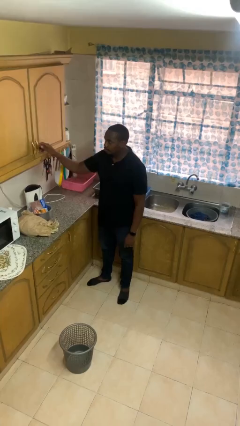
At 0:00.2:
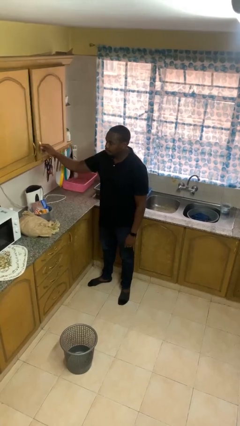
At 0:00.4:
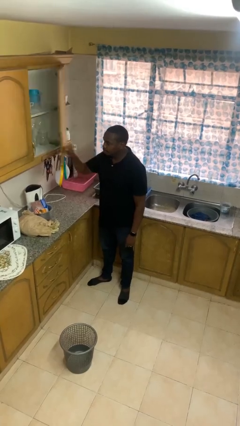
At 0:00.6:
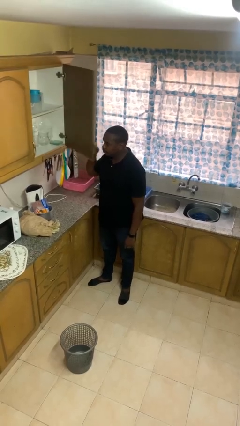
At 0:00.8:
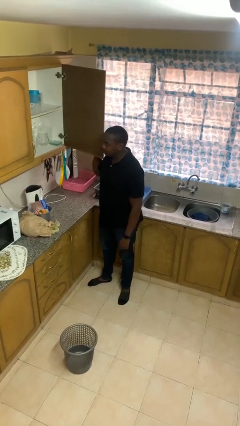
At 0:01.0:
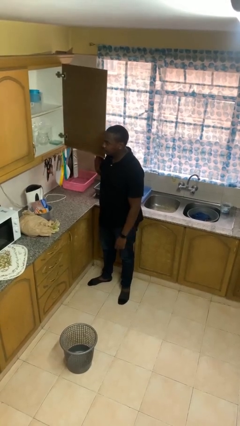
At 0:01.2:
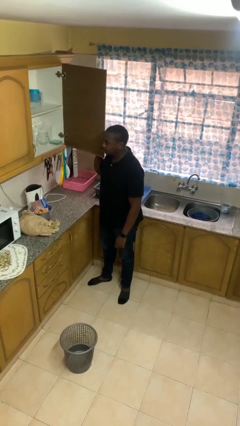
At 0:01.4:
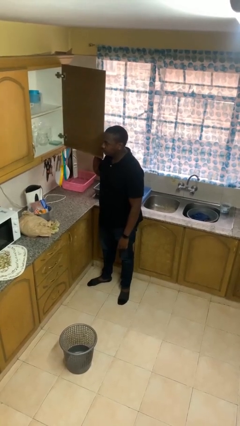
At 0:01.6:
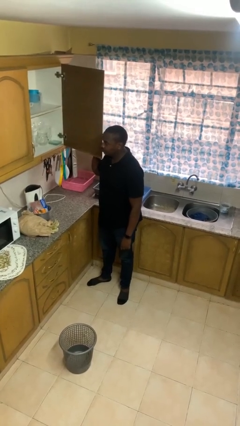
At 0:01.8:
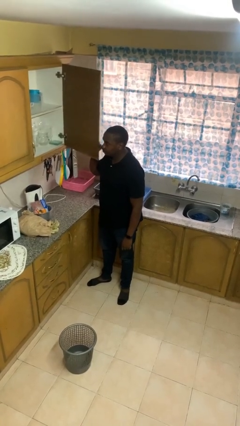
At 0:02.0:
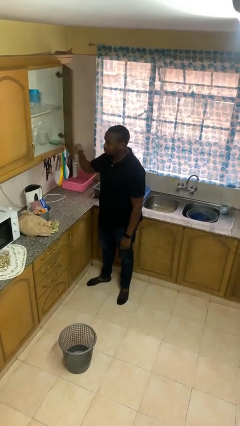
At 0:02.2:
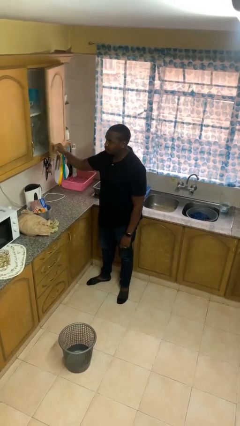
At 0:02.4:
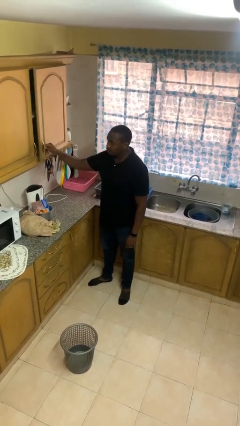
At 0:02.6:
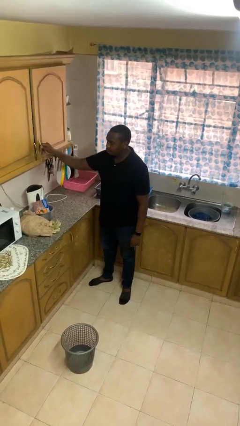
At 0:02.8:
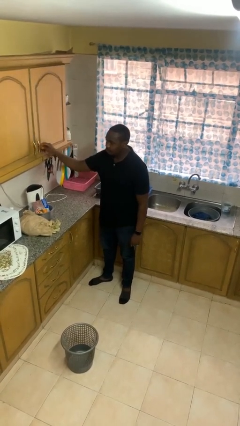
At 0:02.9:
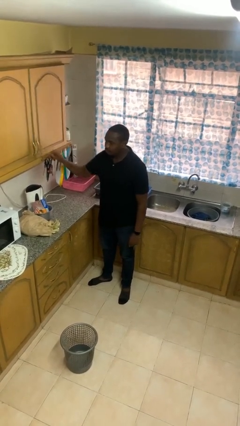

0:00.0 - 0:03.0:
person opens cabinet

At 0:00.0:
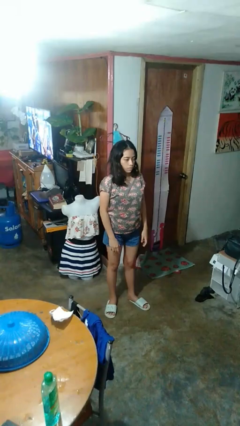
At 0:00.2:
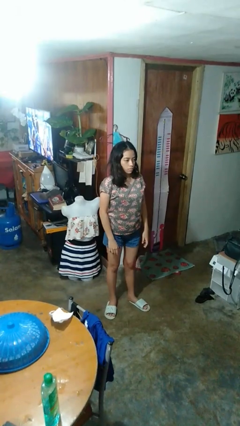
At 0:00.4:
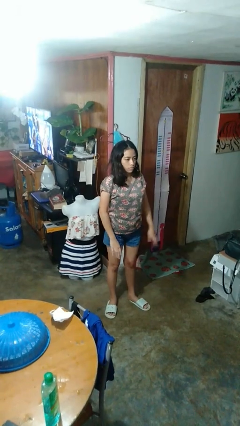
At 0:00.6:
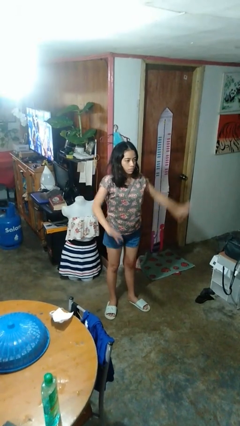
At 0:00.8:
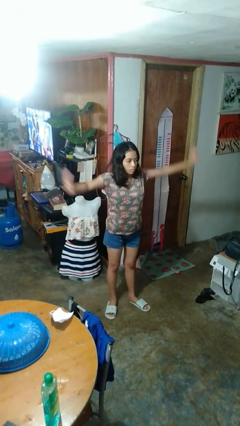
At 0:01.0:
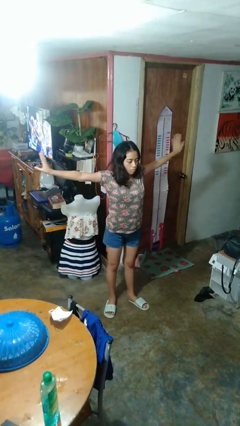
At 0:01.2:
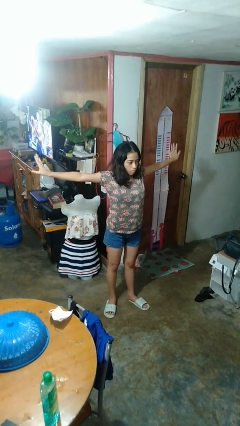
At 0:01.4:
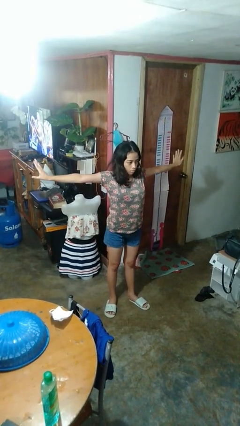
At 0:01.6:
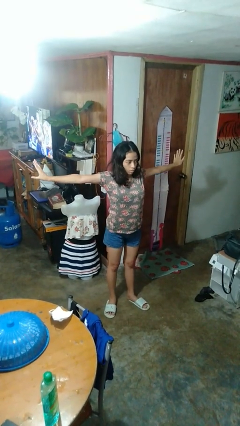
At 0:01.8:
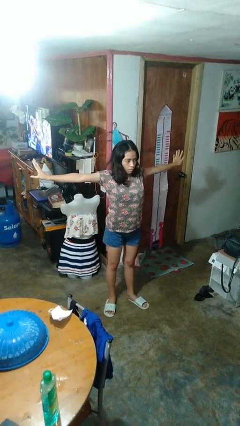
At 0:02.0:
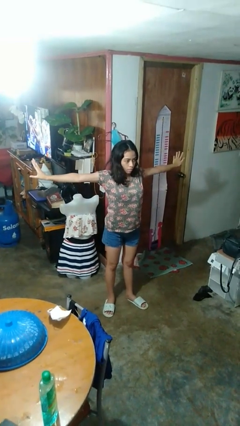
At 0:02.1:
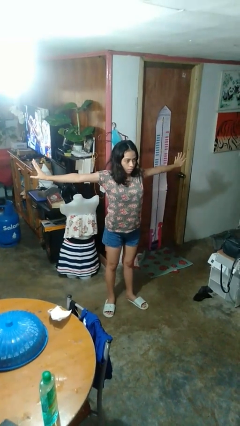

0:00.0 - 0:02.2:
person stretches arms to side

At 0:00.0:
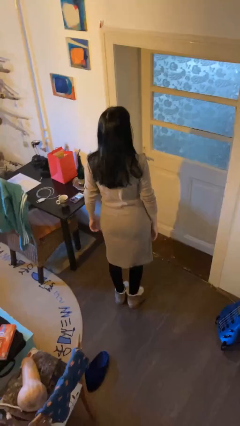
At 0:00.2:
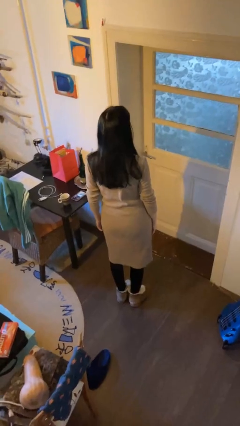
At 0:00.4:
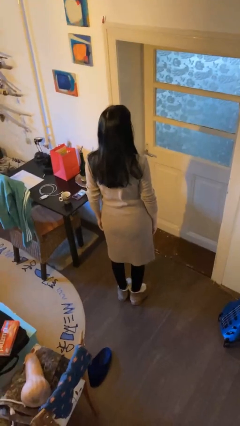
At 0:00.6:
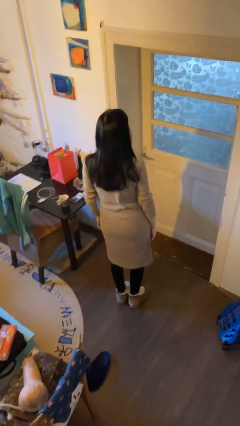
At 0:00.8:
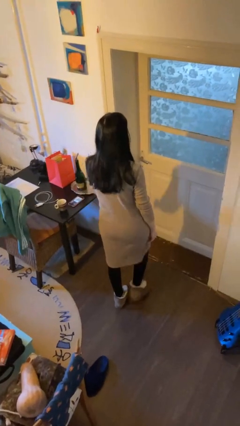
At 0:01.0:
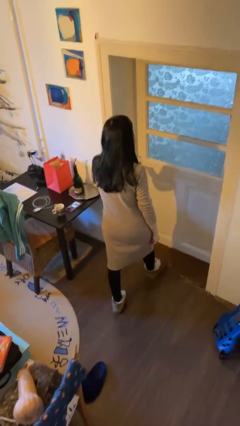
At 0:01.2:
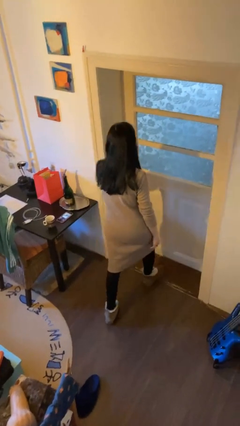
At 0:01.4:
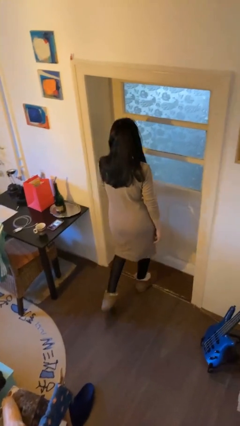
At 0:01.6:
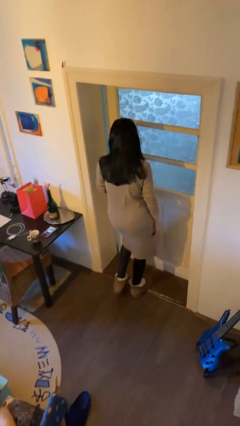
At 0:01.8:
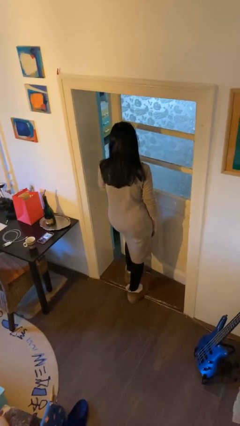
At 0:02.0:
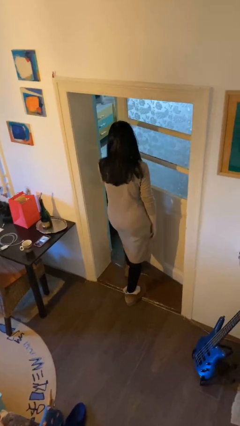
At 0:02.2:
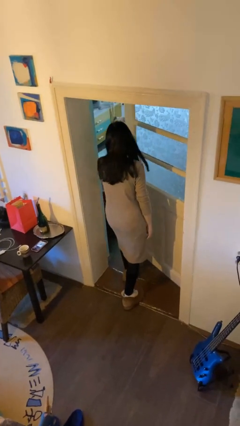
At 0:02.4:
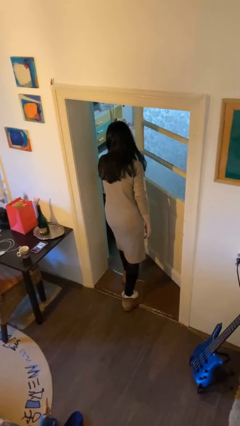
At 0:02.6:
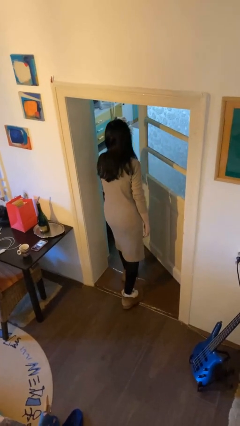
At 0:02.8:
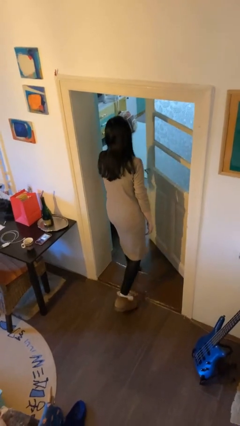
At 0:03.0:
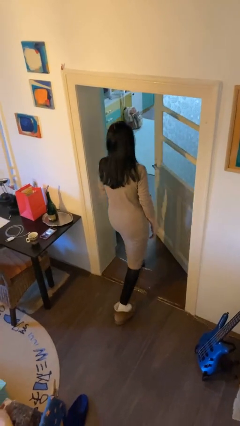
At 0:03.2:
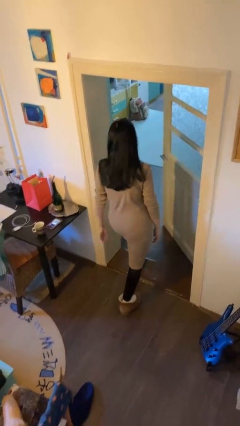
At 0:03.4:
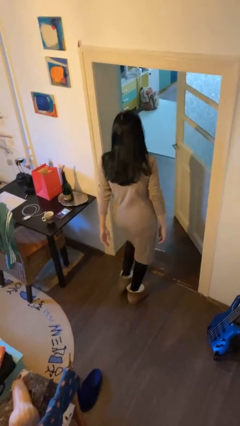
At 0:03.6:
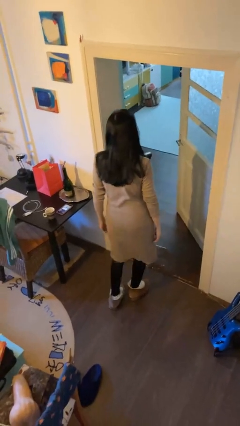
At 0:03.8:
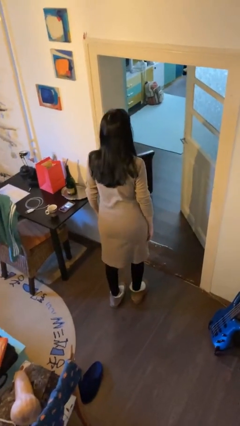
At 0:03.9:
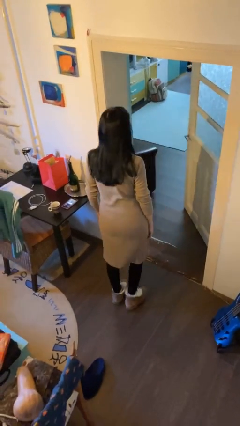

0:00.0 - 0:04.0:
person opens facility door

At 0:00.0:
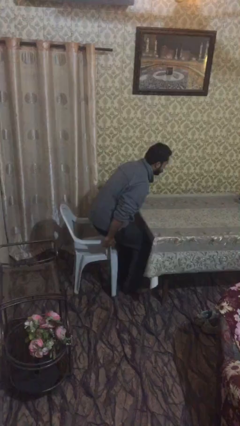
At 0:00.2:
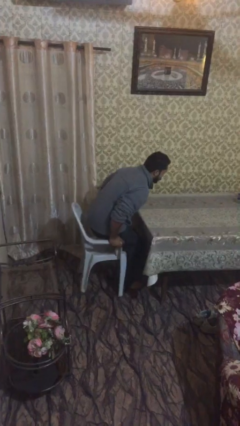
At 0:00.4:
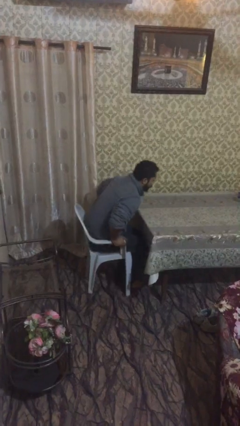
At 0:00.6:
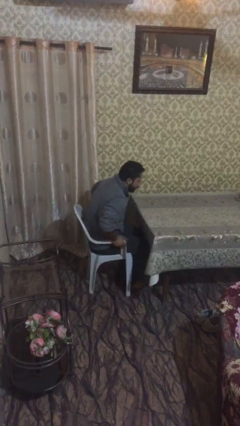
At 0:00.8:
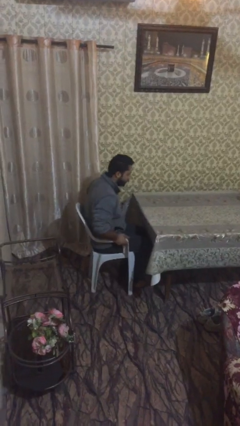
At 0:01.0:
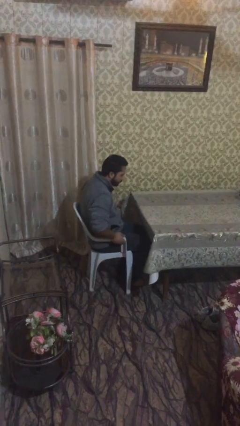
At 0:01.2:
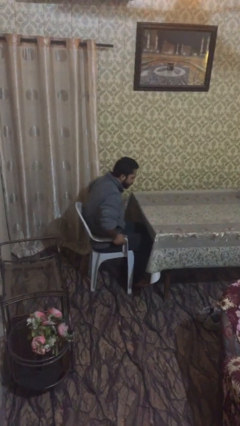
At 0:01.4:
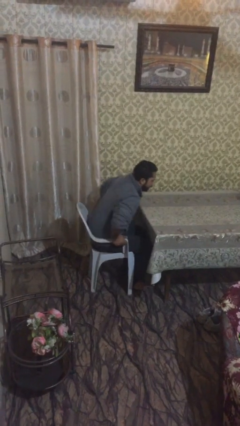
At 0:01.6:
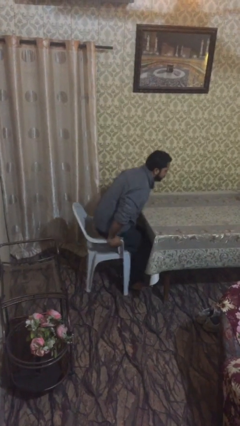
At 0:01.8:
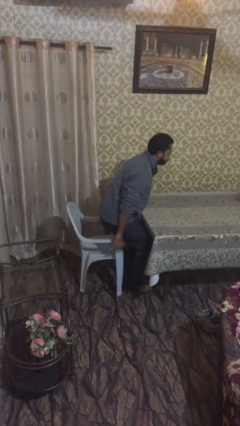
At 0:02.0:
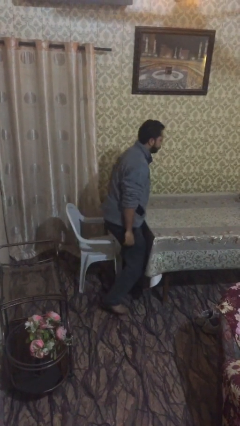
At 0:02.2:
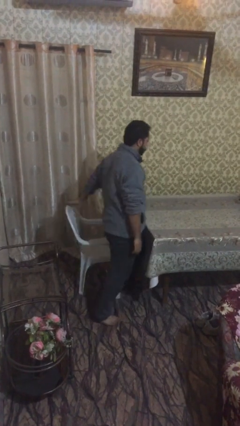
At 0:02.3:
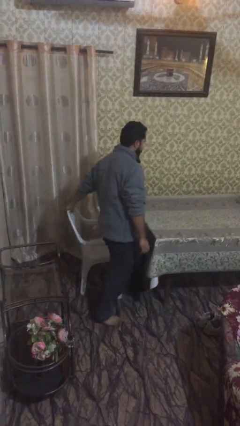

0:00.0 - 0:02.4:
person sits down

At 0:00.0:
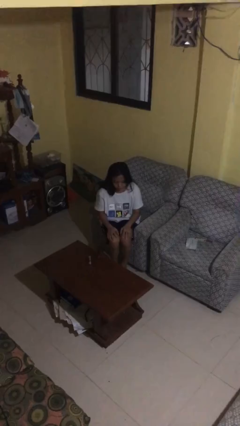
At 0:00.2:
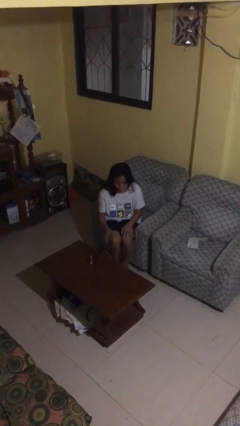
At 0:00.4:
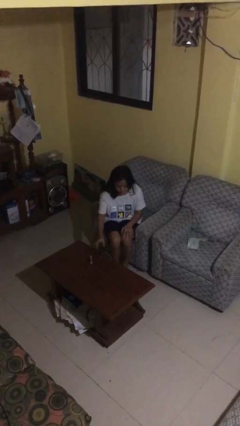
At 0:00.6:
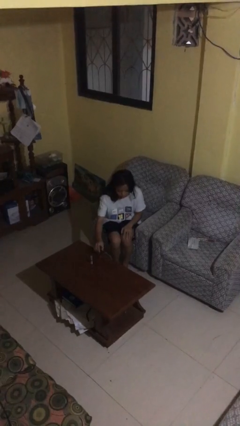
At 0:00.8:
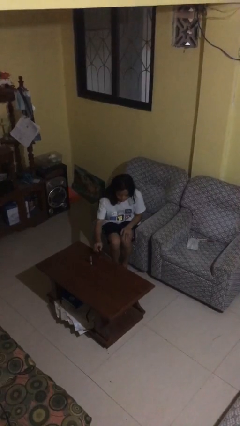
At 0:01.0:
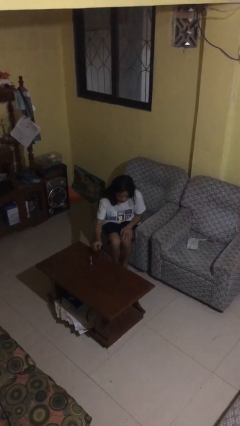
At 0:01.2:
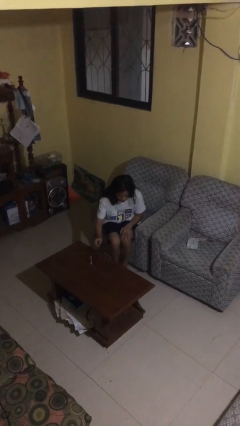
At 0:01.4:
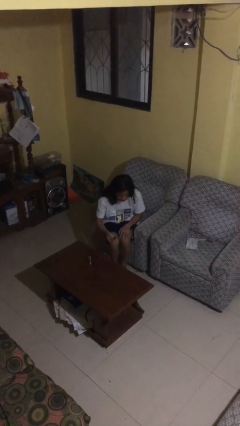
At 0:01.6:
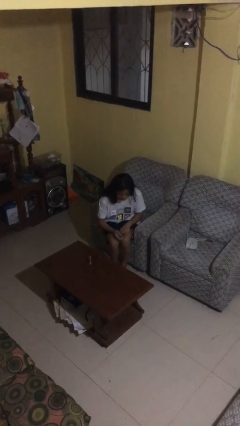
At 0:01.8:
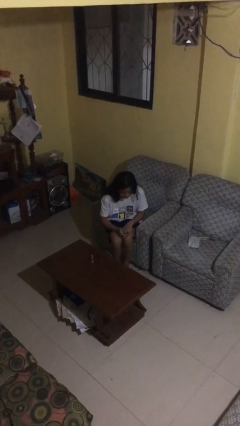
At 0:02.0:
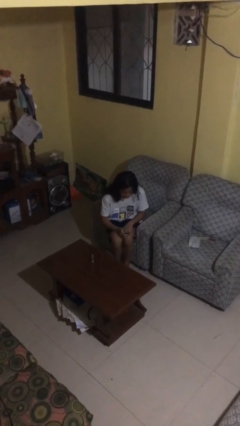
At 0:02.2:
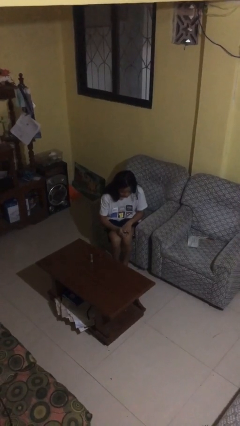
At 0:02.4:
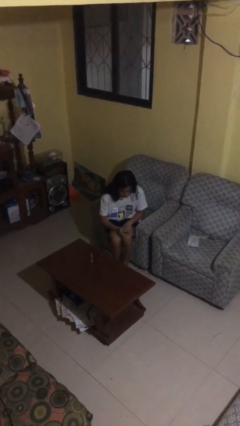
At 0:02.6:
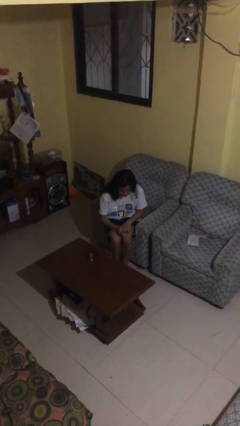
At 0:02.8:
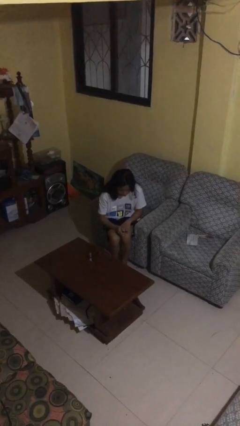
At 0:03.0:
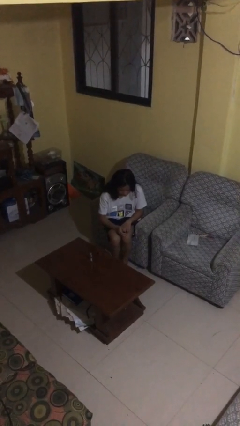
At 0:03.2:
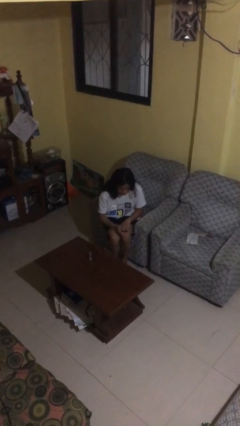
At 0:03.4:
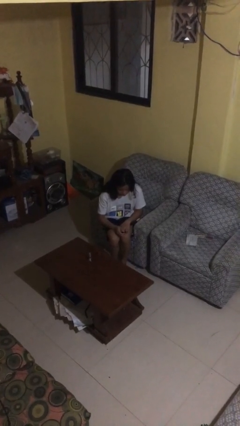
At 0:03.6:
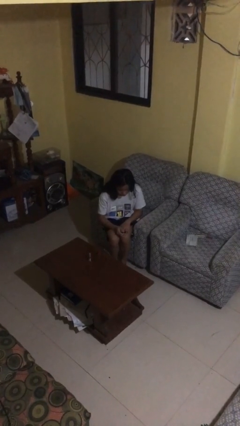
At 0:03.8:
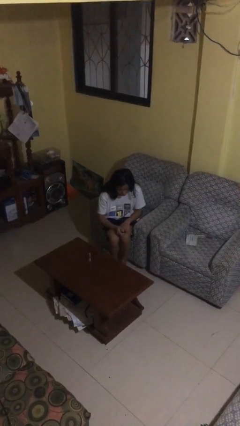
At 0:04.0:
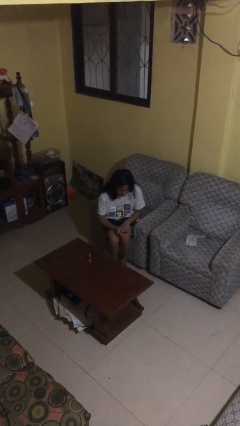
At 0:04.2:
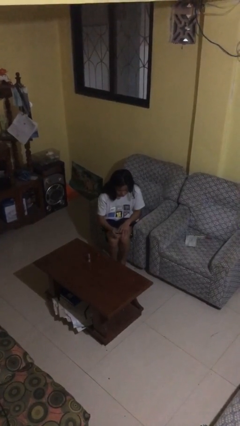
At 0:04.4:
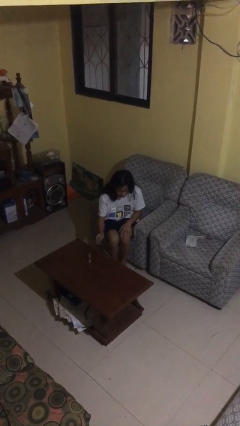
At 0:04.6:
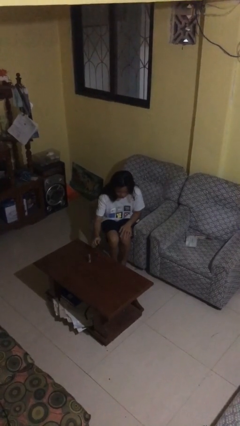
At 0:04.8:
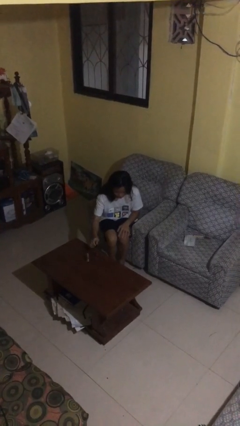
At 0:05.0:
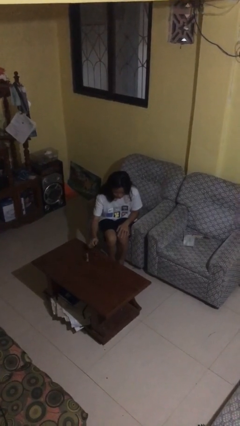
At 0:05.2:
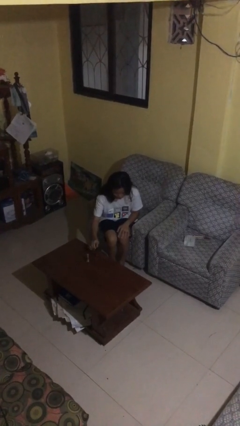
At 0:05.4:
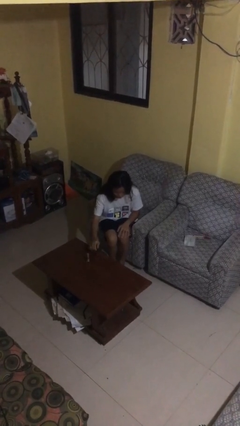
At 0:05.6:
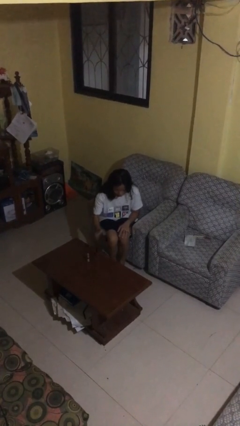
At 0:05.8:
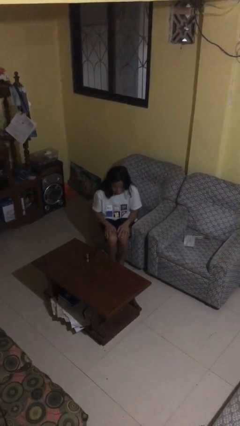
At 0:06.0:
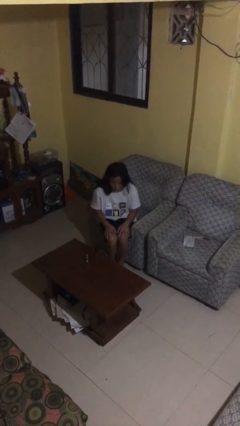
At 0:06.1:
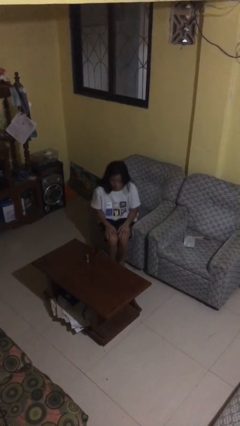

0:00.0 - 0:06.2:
person paints fingernails

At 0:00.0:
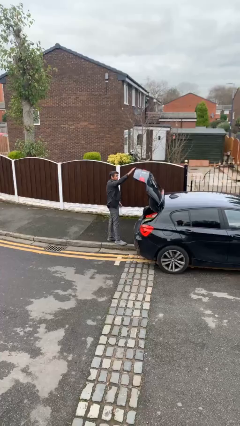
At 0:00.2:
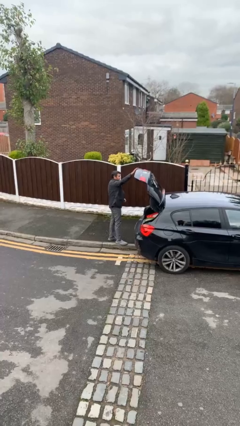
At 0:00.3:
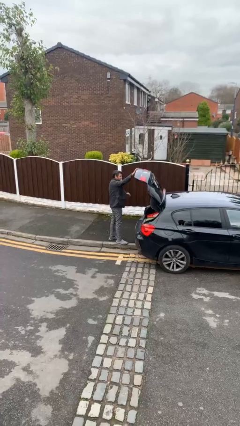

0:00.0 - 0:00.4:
person opens car trunk
